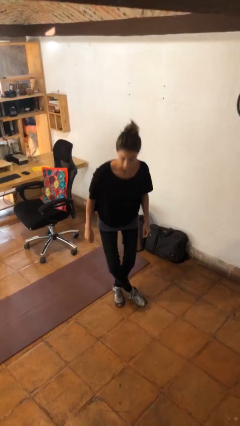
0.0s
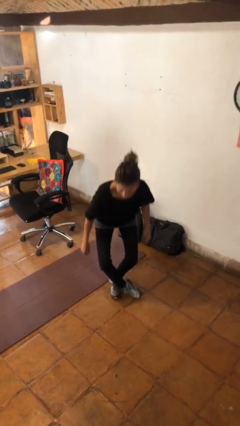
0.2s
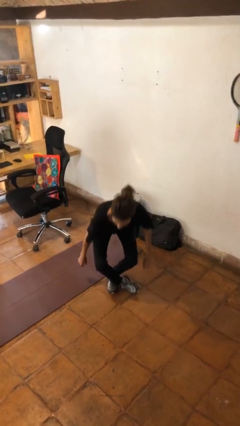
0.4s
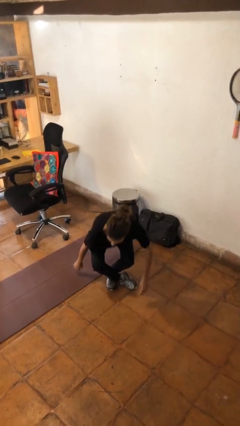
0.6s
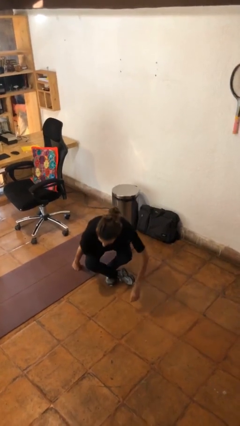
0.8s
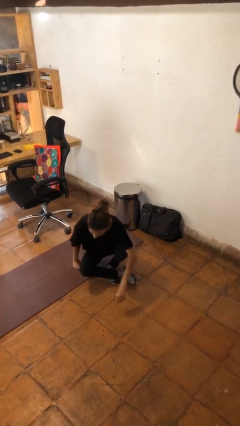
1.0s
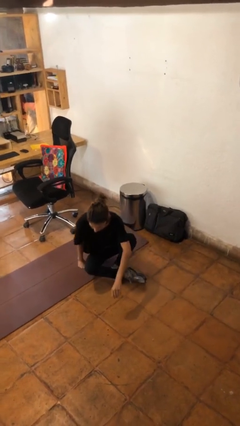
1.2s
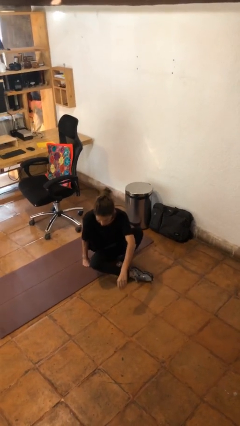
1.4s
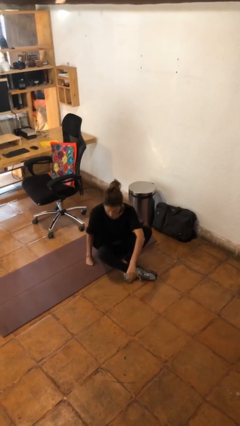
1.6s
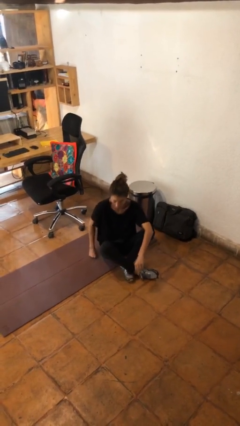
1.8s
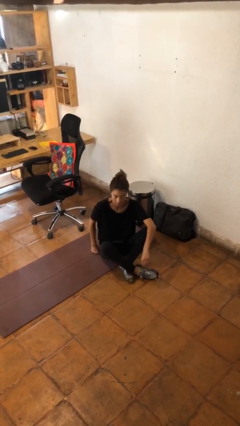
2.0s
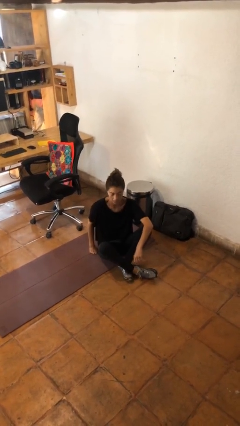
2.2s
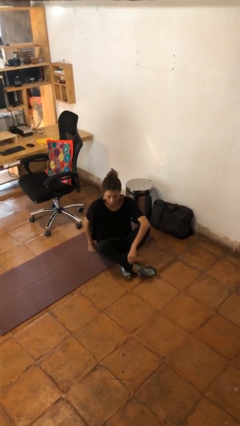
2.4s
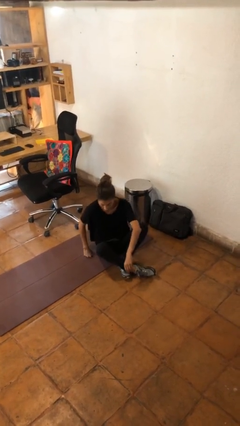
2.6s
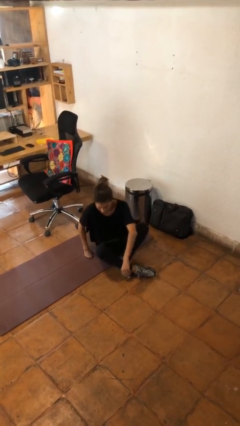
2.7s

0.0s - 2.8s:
person sits crisscross

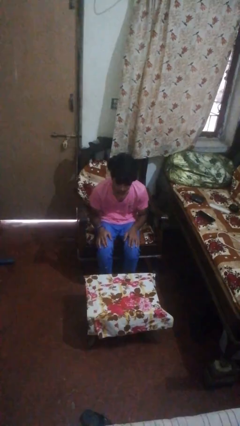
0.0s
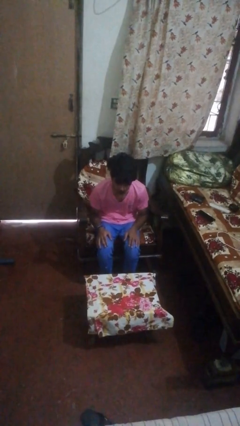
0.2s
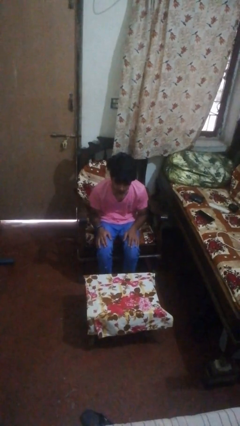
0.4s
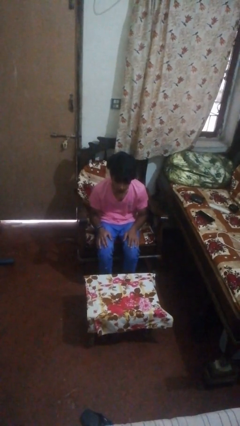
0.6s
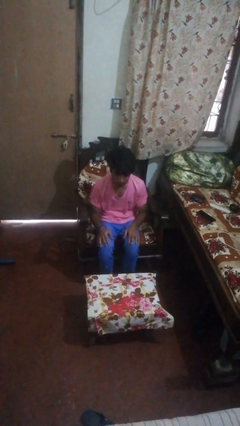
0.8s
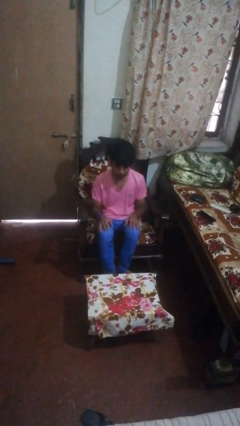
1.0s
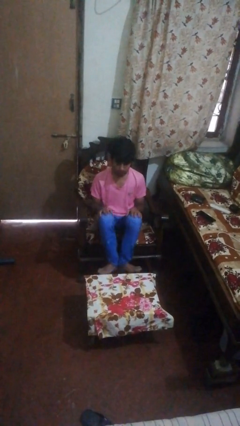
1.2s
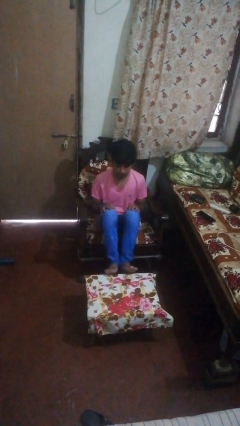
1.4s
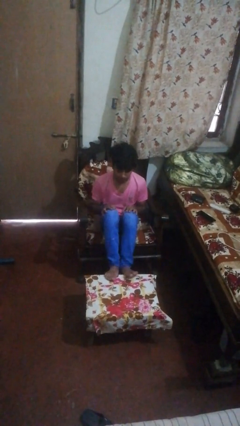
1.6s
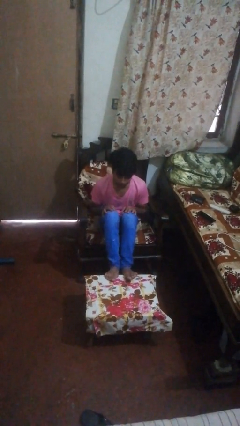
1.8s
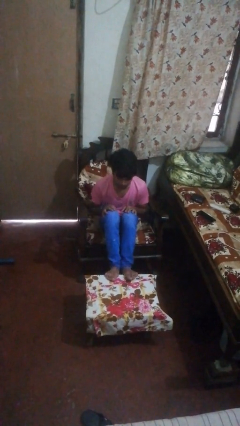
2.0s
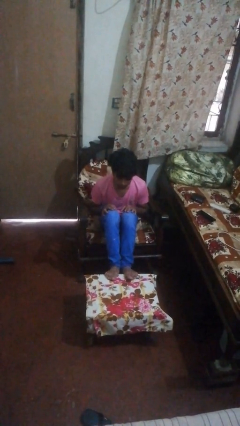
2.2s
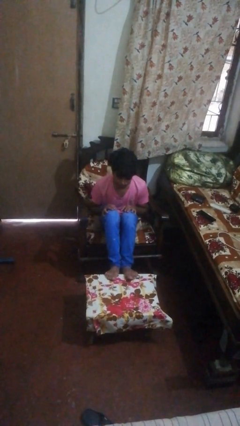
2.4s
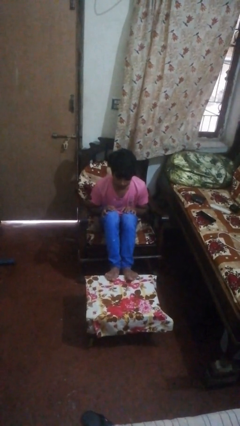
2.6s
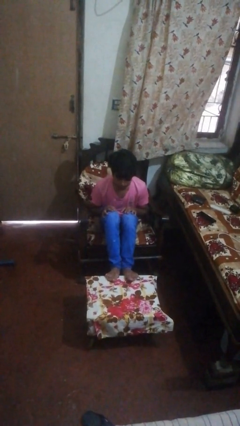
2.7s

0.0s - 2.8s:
person puts feet up

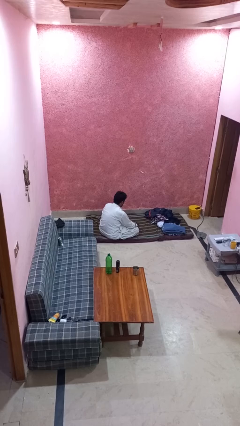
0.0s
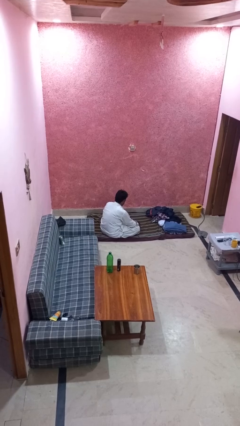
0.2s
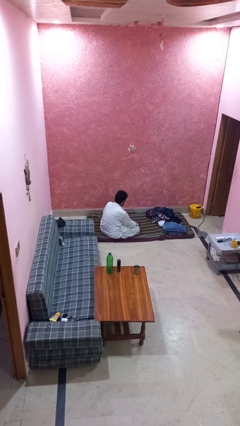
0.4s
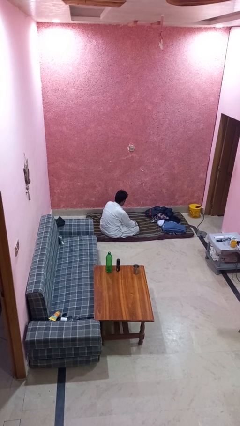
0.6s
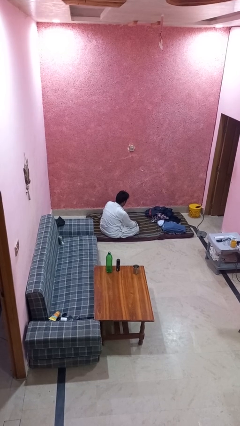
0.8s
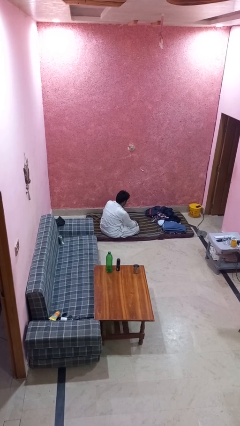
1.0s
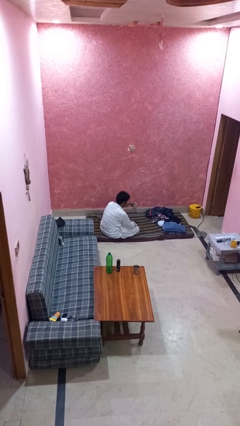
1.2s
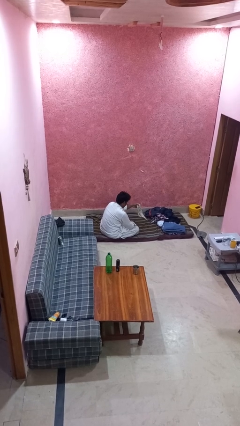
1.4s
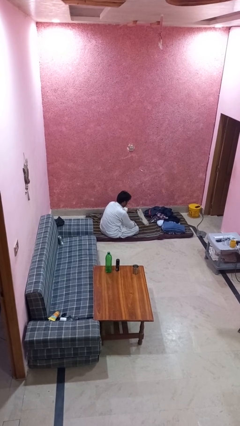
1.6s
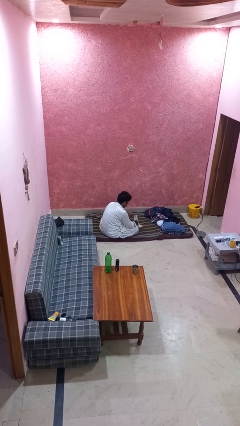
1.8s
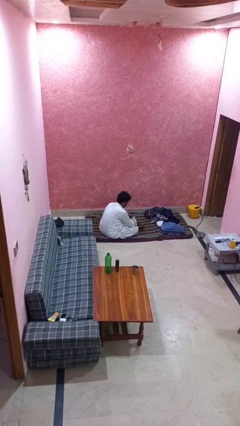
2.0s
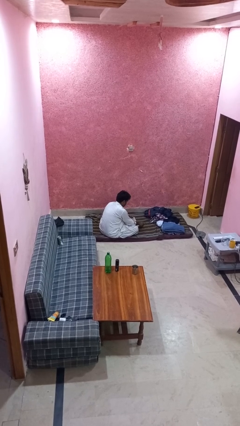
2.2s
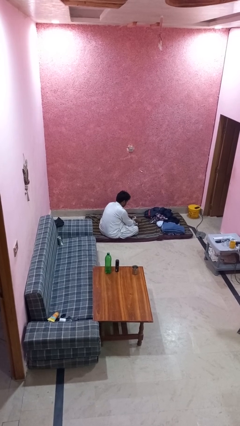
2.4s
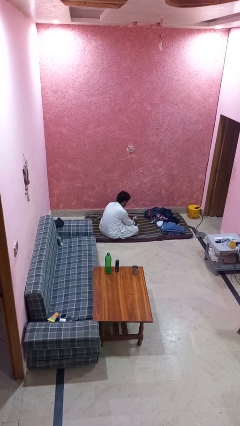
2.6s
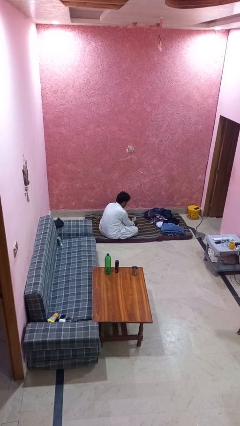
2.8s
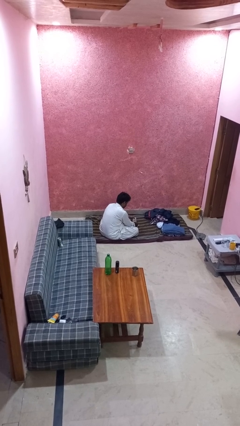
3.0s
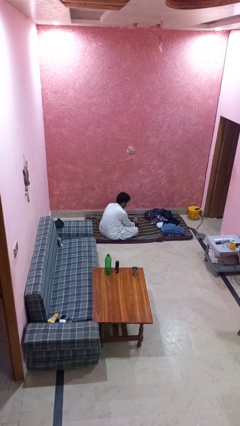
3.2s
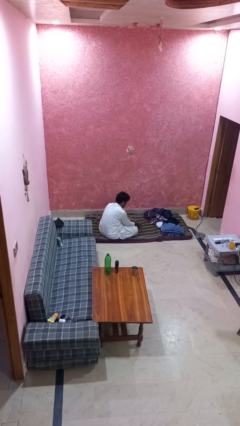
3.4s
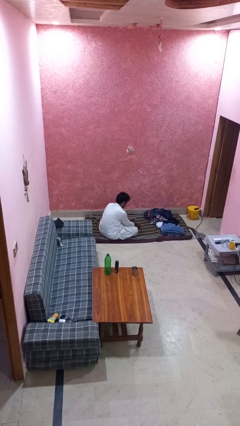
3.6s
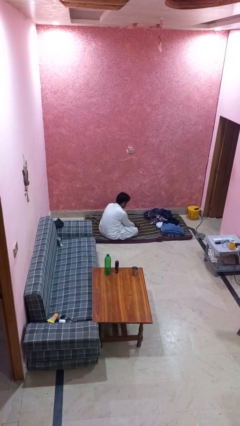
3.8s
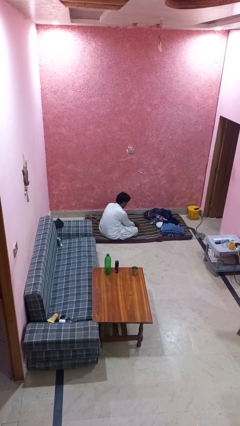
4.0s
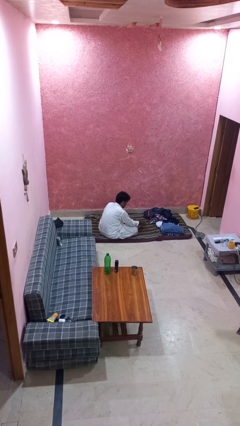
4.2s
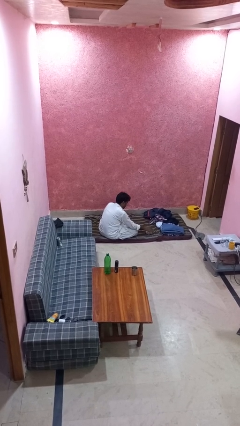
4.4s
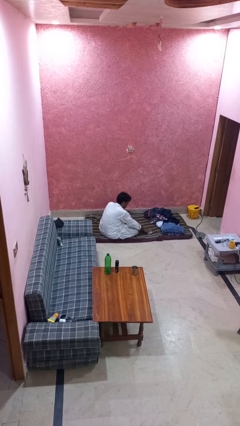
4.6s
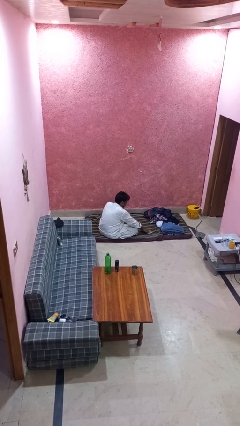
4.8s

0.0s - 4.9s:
person folds socks

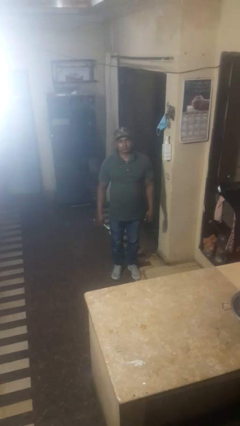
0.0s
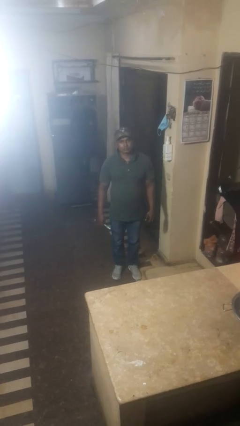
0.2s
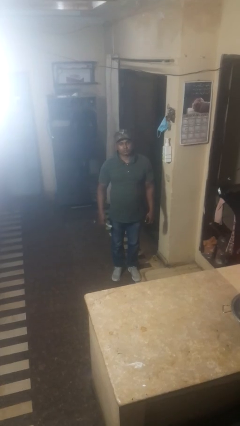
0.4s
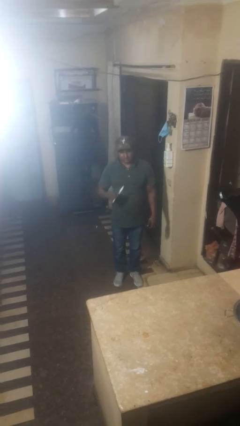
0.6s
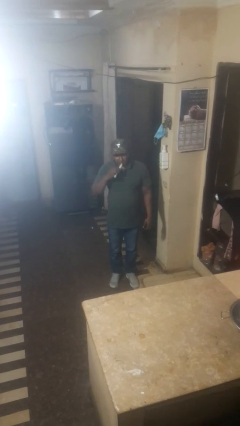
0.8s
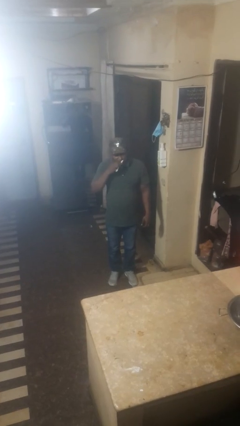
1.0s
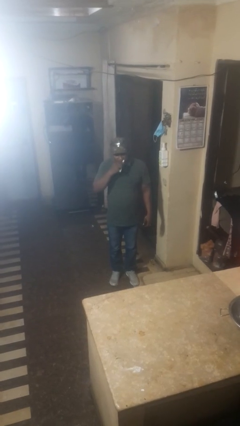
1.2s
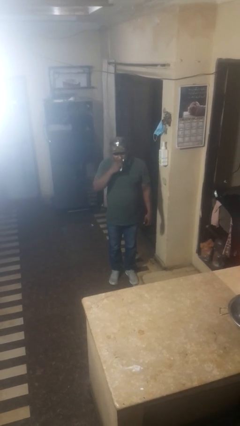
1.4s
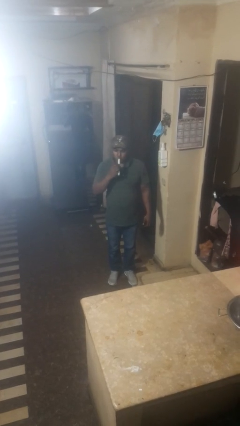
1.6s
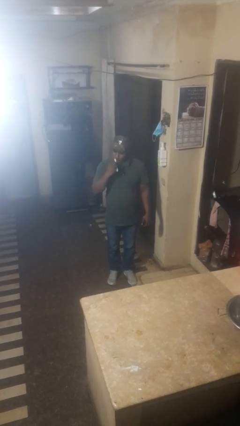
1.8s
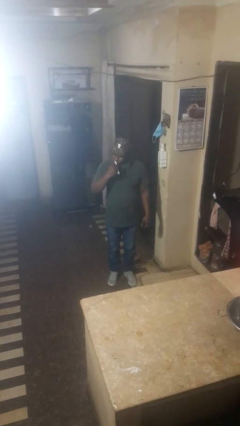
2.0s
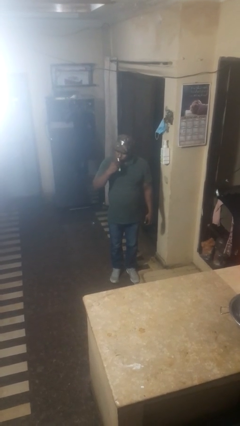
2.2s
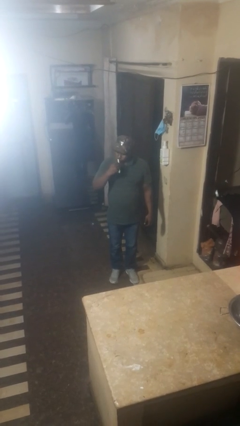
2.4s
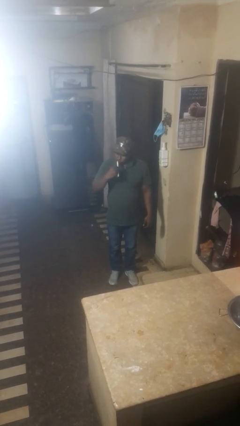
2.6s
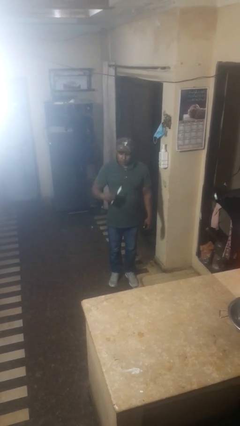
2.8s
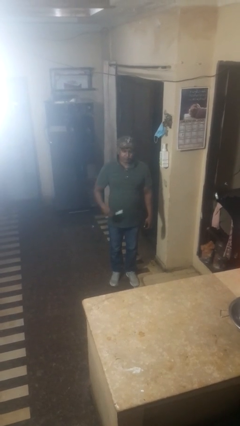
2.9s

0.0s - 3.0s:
person brushes teeth

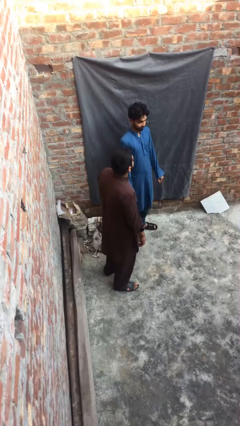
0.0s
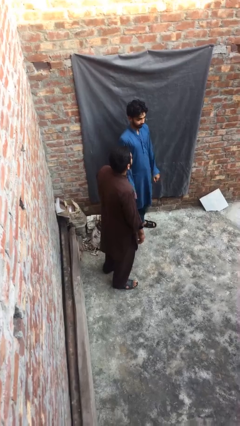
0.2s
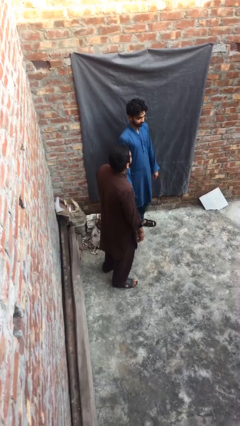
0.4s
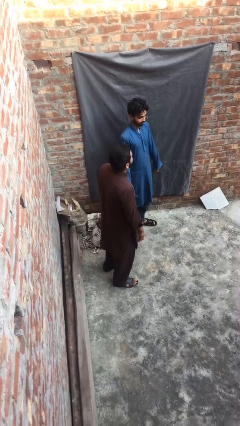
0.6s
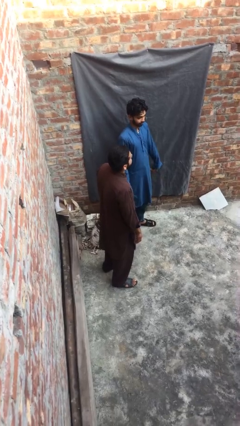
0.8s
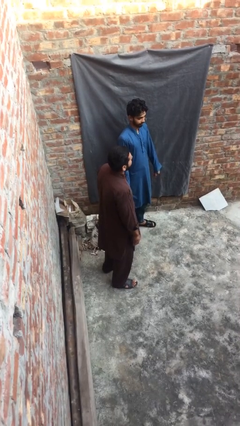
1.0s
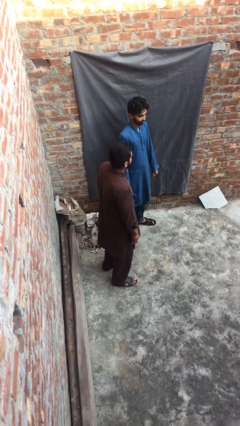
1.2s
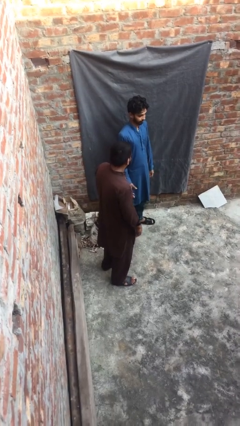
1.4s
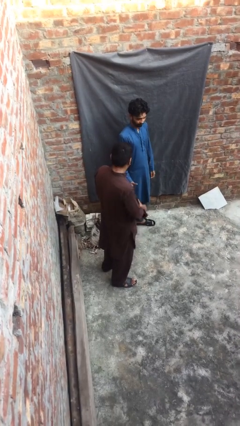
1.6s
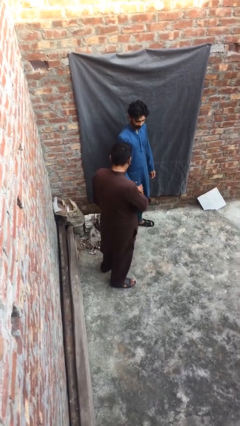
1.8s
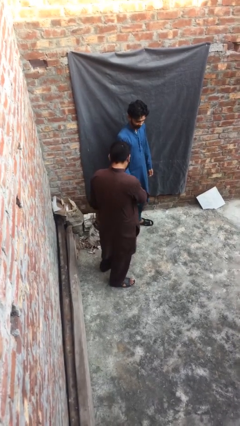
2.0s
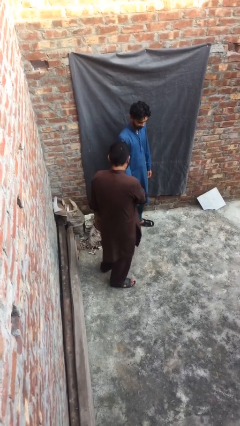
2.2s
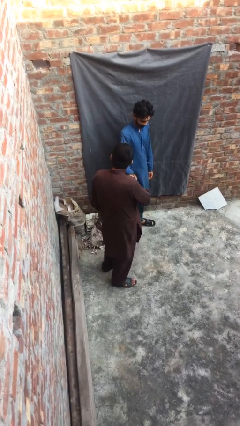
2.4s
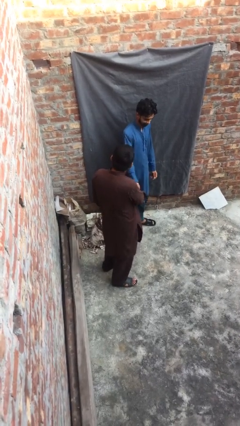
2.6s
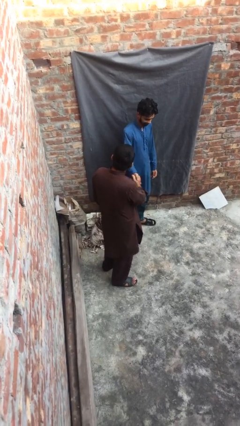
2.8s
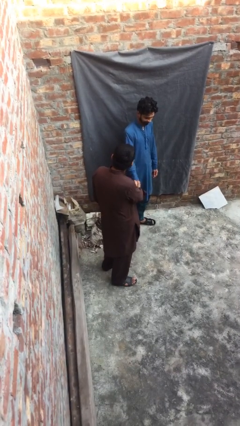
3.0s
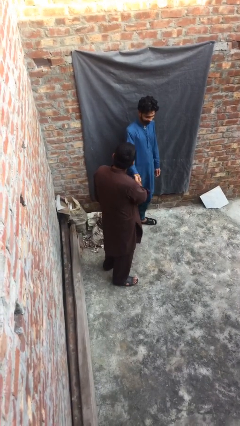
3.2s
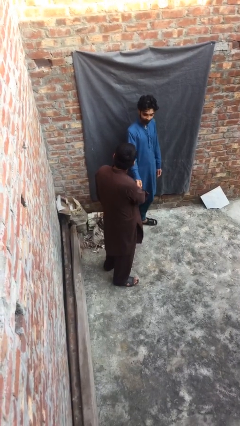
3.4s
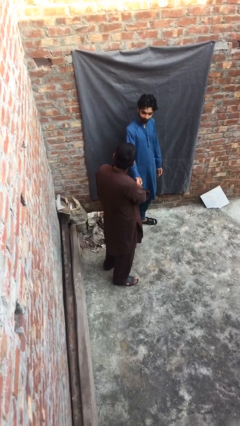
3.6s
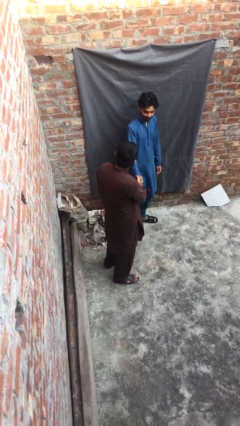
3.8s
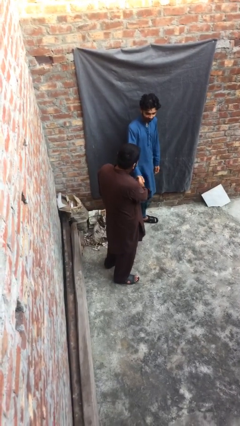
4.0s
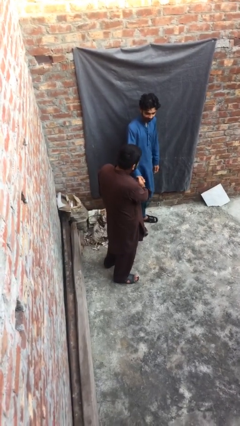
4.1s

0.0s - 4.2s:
person shakes hand
